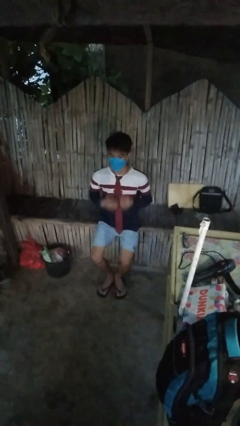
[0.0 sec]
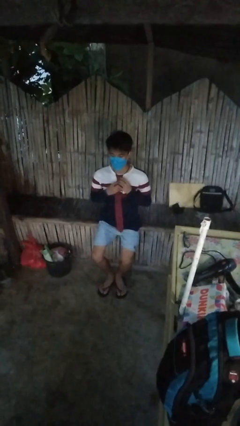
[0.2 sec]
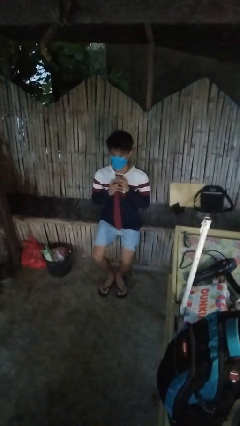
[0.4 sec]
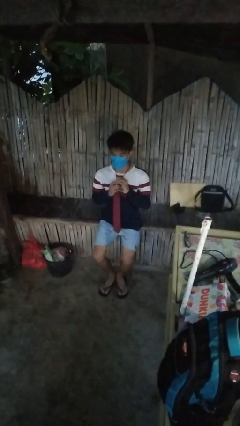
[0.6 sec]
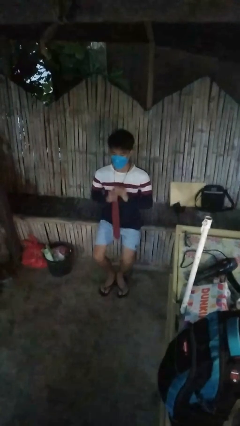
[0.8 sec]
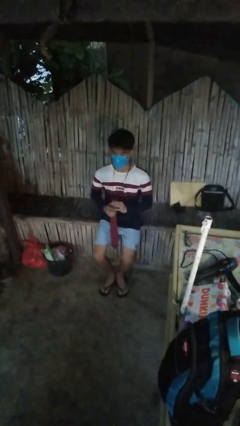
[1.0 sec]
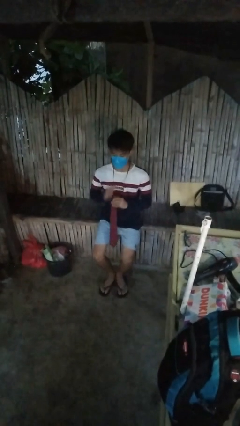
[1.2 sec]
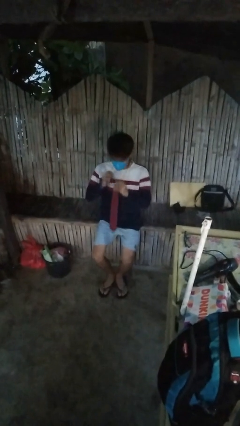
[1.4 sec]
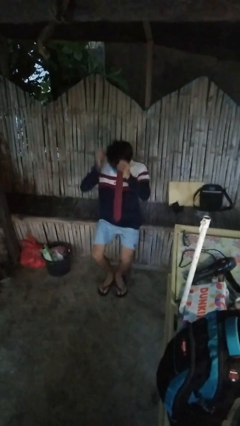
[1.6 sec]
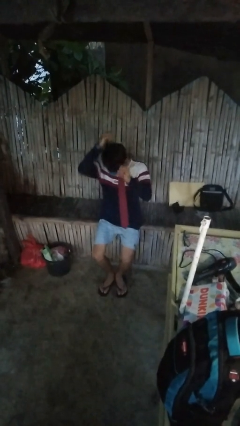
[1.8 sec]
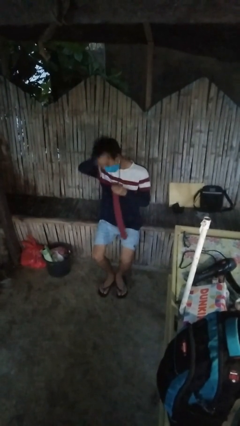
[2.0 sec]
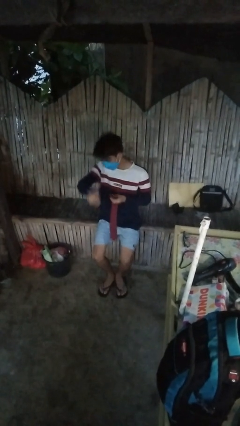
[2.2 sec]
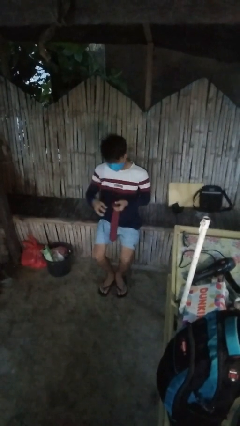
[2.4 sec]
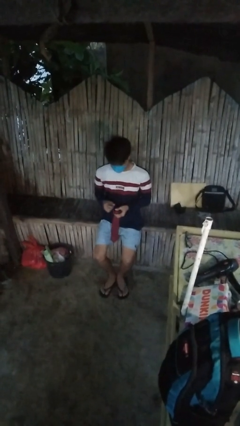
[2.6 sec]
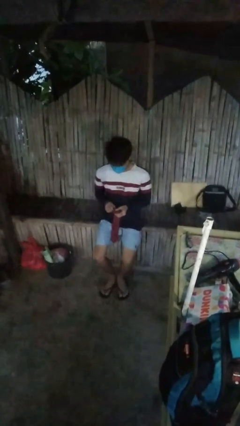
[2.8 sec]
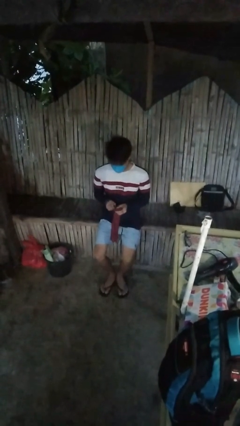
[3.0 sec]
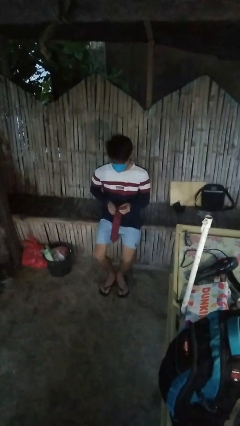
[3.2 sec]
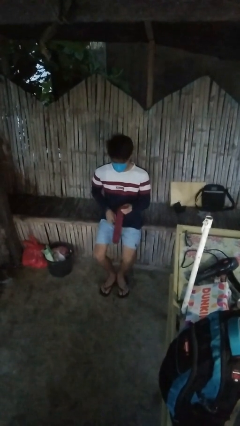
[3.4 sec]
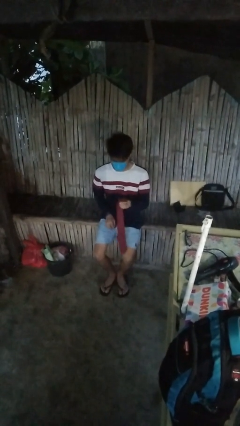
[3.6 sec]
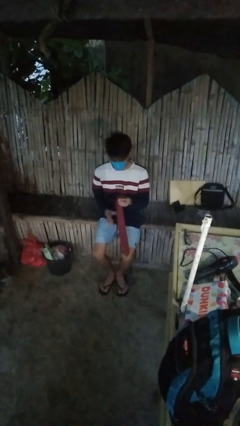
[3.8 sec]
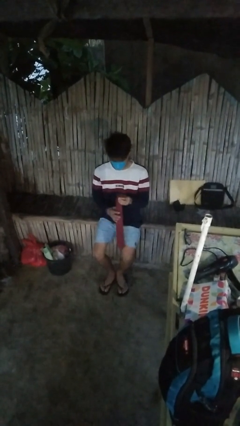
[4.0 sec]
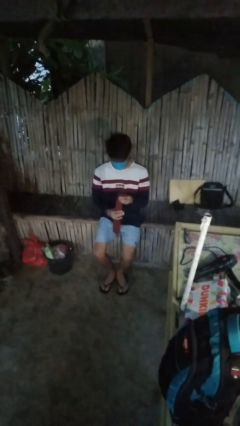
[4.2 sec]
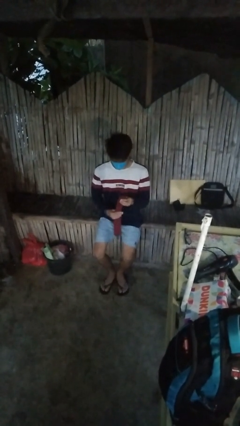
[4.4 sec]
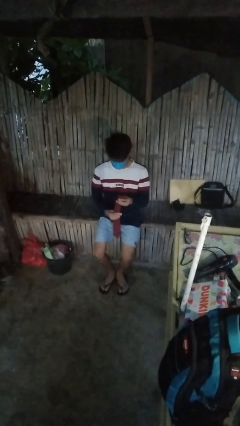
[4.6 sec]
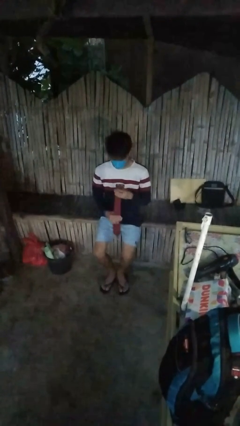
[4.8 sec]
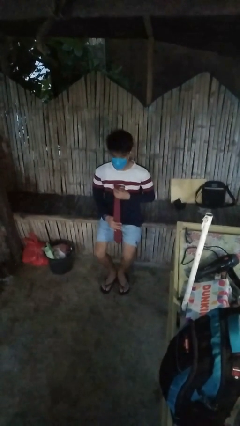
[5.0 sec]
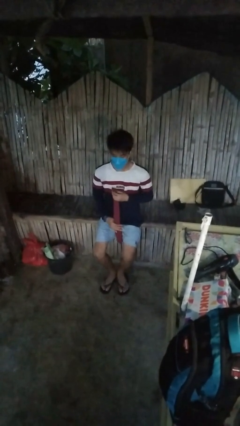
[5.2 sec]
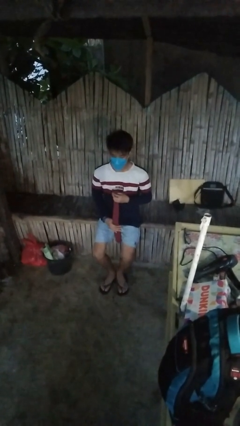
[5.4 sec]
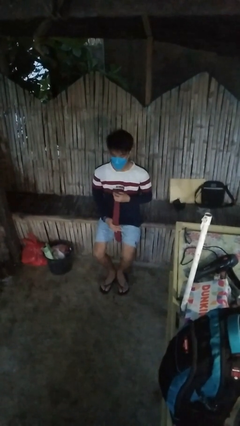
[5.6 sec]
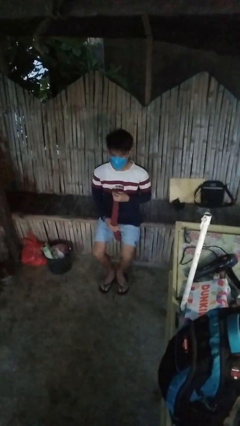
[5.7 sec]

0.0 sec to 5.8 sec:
person takes off necktie

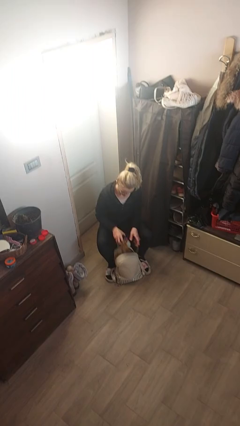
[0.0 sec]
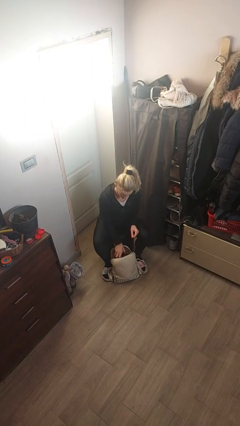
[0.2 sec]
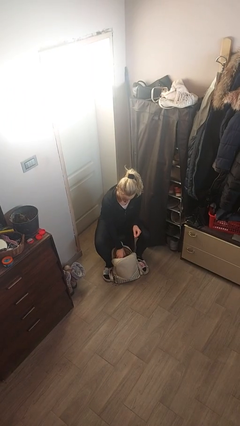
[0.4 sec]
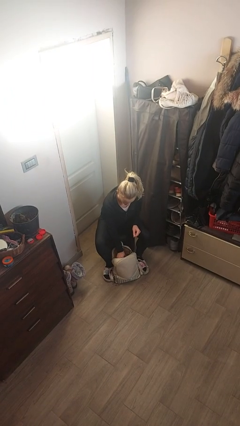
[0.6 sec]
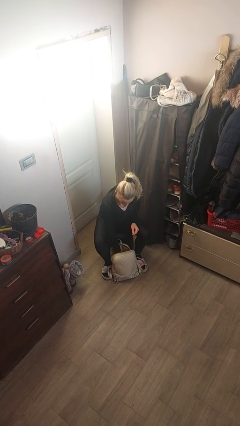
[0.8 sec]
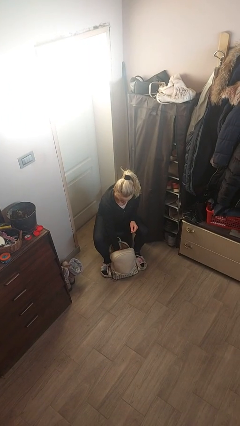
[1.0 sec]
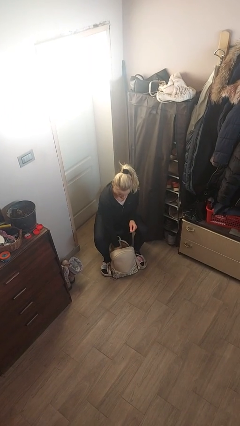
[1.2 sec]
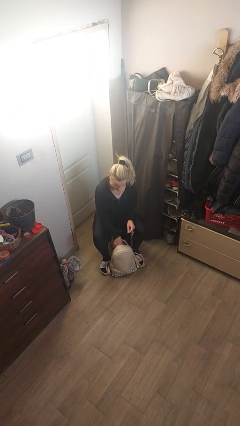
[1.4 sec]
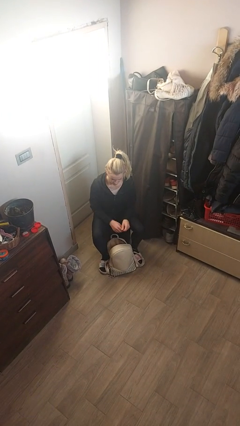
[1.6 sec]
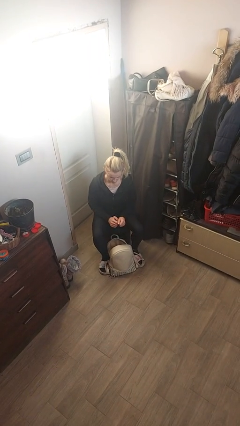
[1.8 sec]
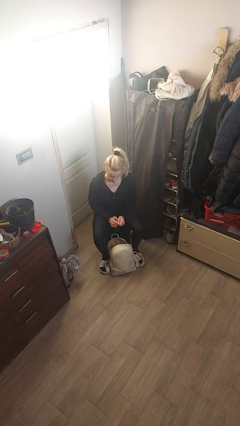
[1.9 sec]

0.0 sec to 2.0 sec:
person puts object into backpack

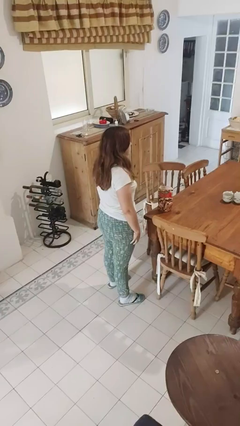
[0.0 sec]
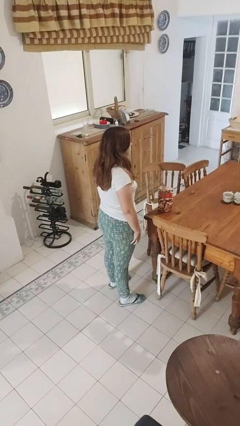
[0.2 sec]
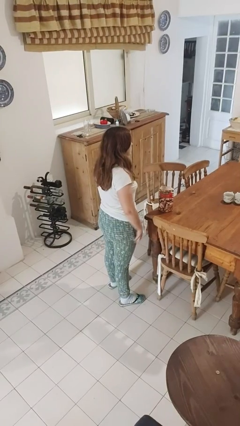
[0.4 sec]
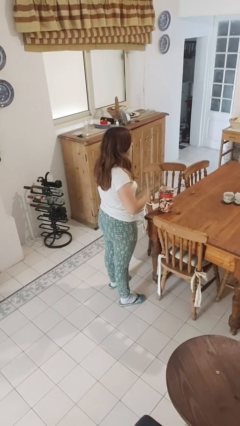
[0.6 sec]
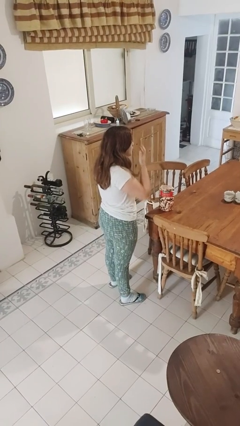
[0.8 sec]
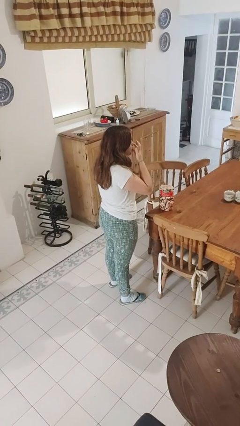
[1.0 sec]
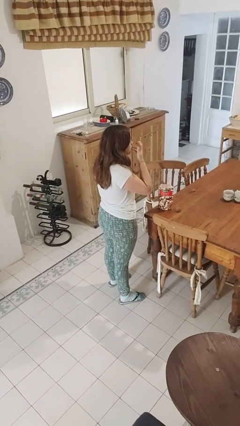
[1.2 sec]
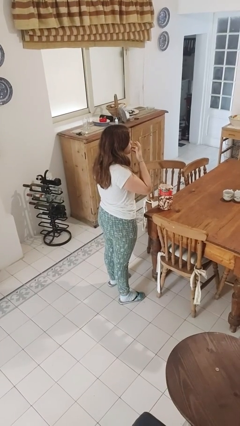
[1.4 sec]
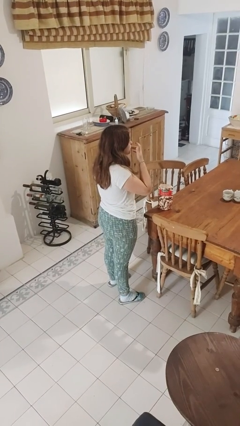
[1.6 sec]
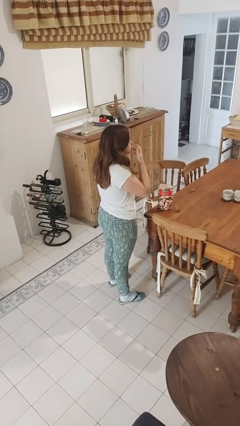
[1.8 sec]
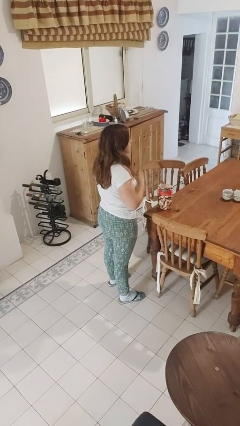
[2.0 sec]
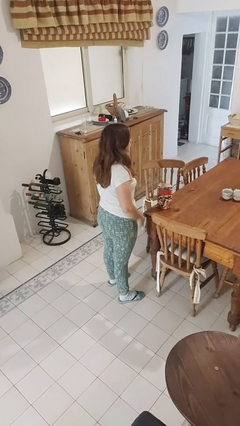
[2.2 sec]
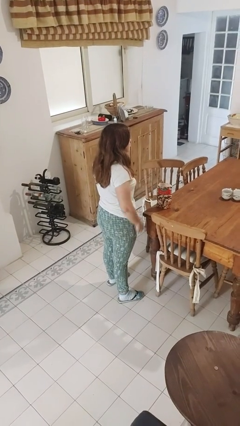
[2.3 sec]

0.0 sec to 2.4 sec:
person licks fingers

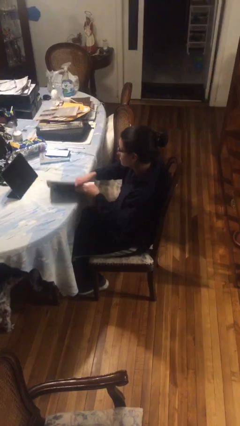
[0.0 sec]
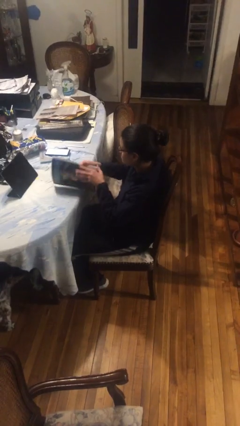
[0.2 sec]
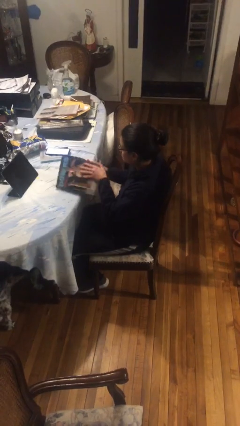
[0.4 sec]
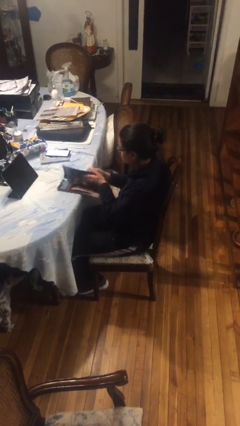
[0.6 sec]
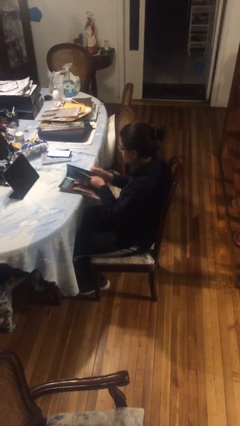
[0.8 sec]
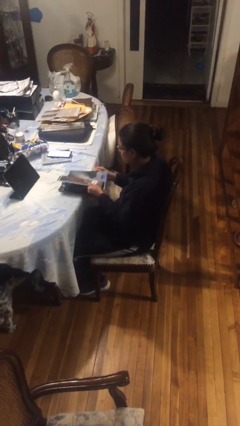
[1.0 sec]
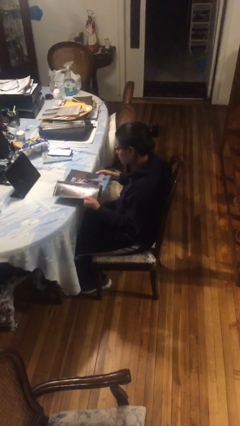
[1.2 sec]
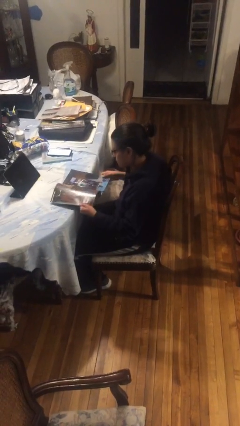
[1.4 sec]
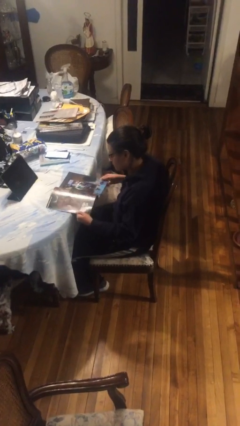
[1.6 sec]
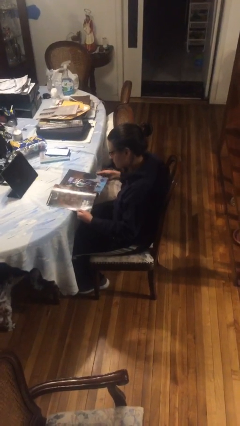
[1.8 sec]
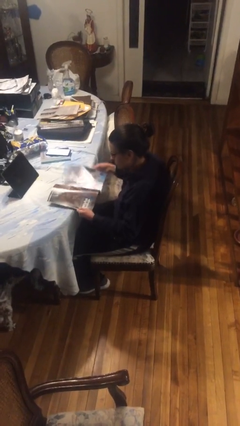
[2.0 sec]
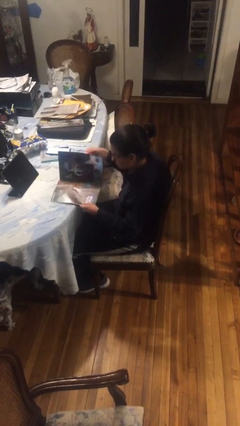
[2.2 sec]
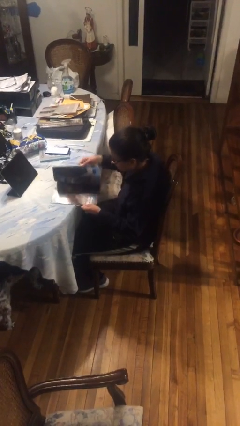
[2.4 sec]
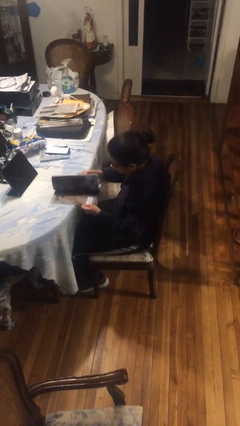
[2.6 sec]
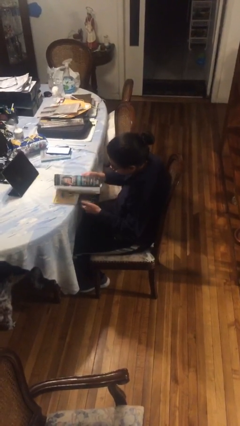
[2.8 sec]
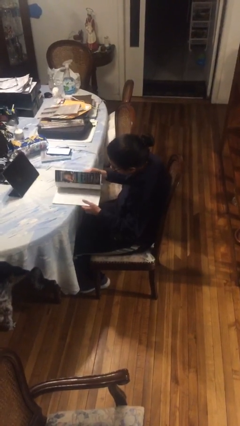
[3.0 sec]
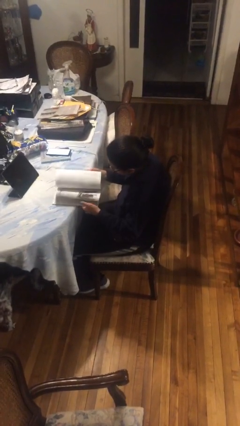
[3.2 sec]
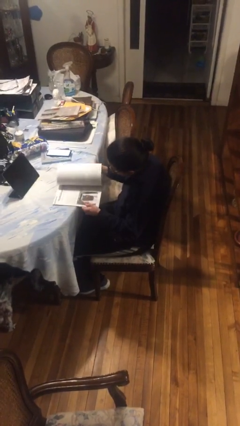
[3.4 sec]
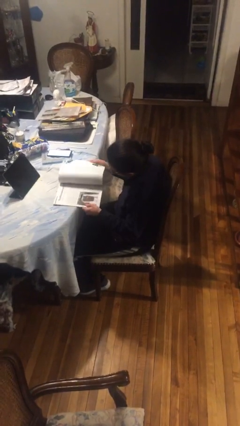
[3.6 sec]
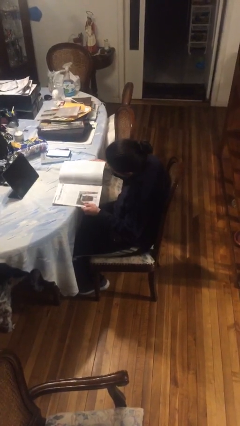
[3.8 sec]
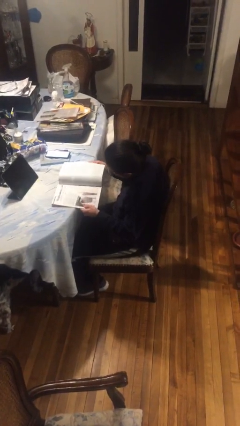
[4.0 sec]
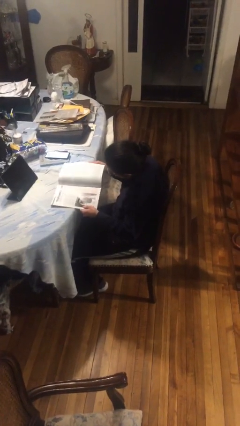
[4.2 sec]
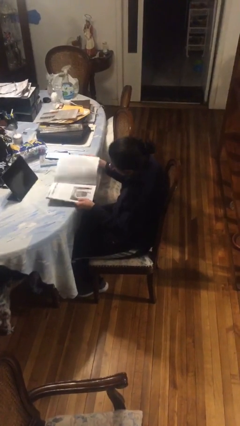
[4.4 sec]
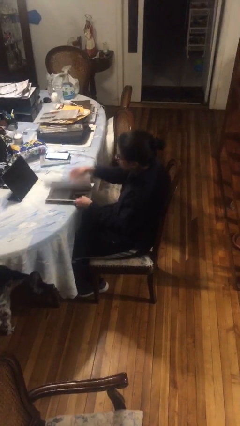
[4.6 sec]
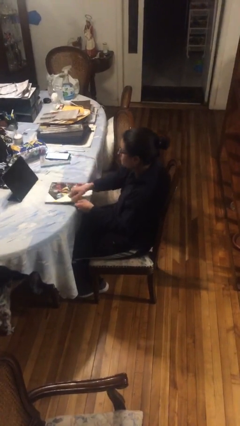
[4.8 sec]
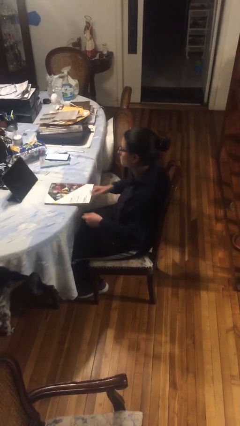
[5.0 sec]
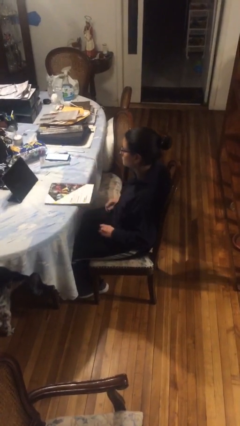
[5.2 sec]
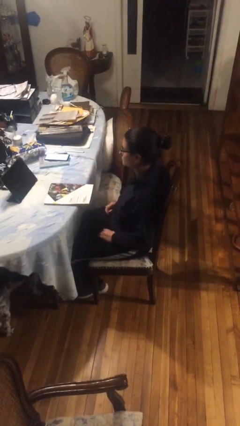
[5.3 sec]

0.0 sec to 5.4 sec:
person reads magazine

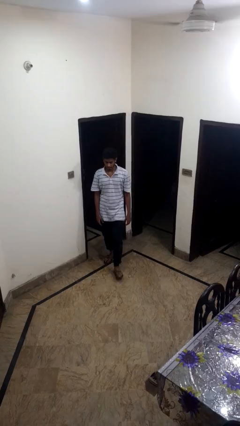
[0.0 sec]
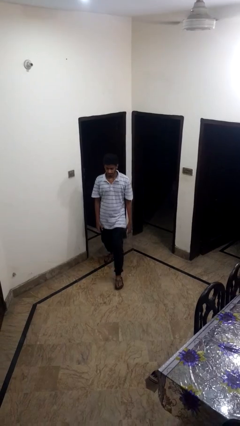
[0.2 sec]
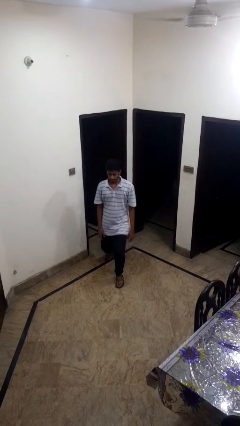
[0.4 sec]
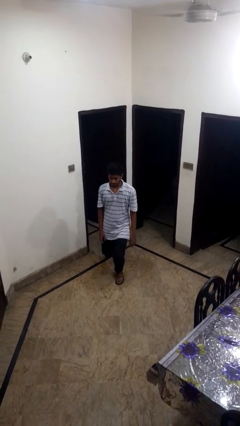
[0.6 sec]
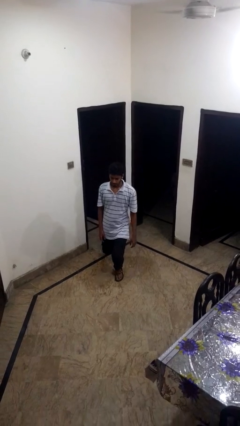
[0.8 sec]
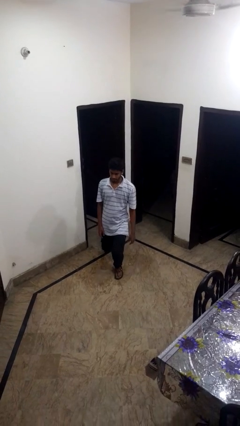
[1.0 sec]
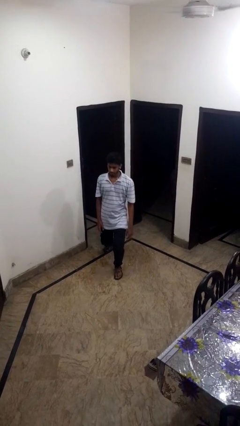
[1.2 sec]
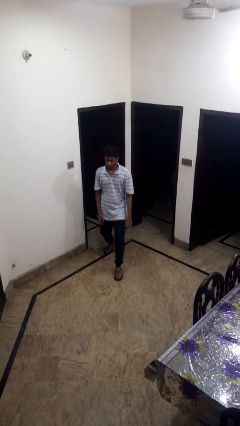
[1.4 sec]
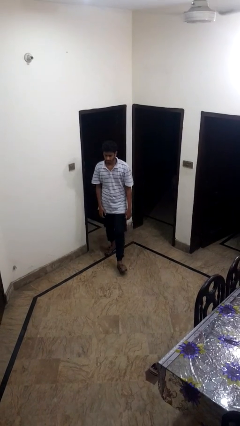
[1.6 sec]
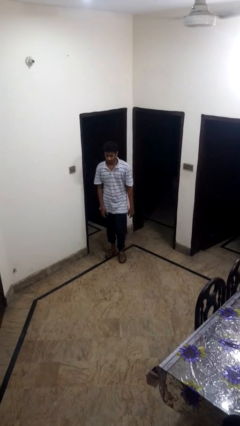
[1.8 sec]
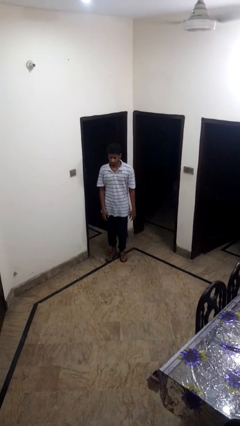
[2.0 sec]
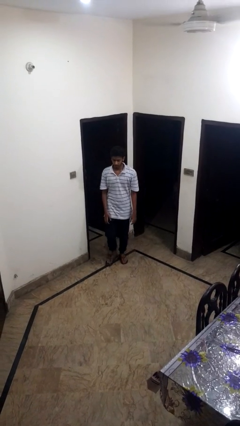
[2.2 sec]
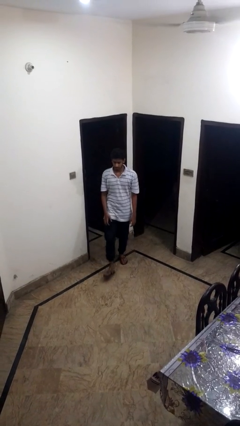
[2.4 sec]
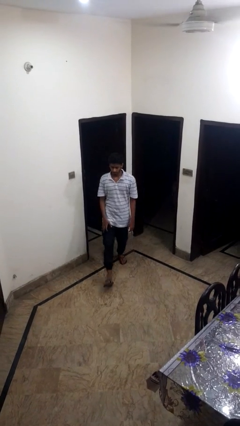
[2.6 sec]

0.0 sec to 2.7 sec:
person exercises with lunges
